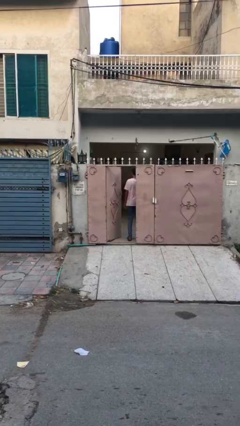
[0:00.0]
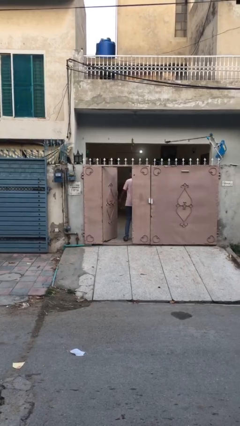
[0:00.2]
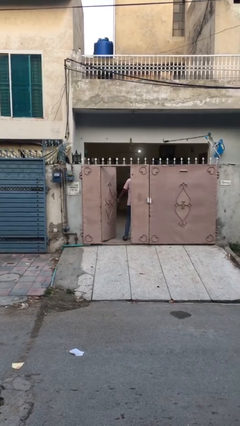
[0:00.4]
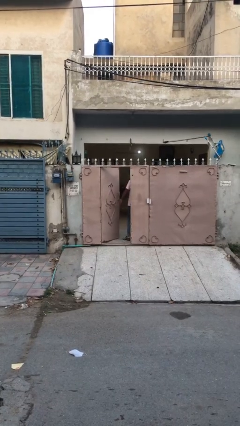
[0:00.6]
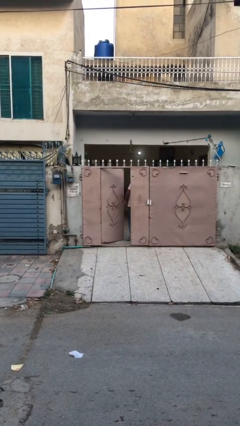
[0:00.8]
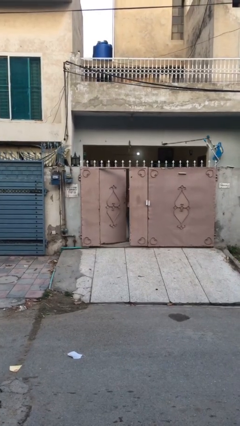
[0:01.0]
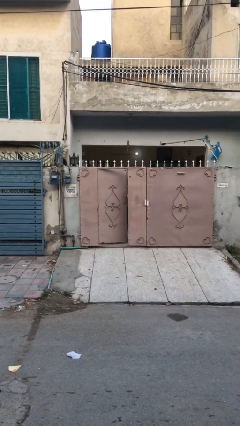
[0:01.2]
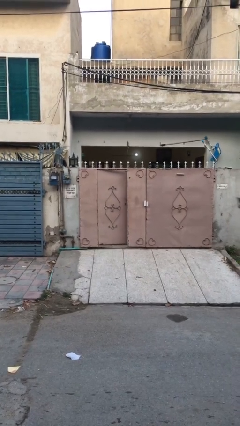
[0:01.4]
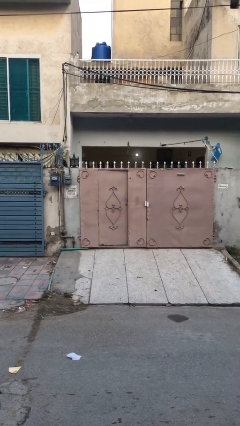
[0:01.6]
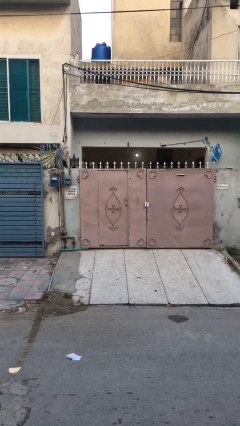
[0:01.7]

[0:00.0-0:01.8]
person closes facility door

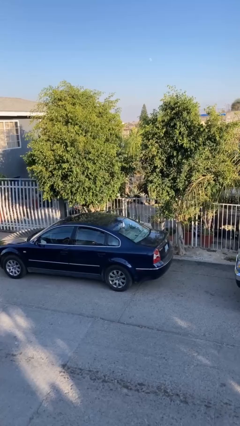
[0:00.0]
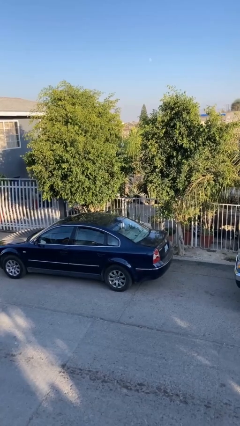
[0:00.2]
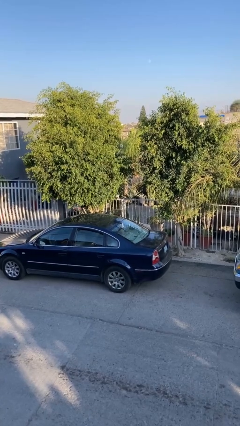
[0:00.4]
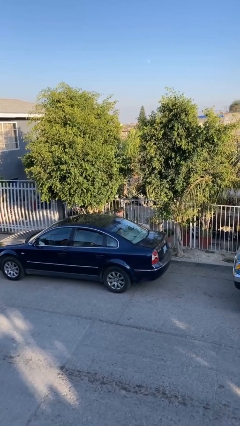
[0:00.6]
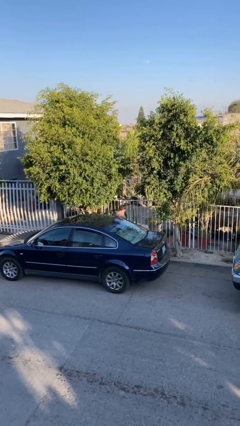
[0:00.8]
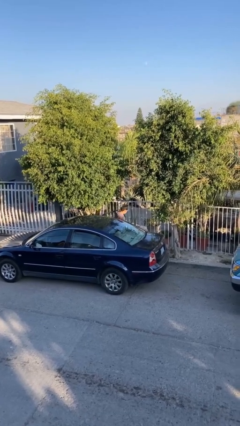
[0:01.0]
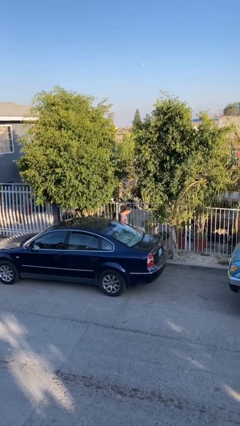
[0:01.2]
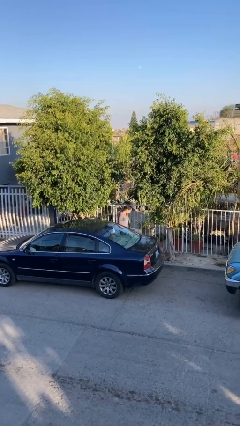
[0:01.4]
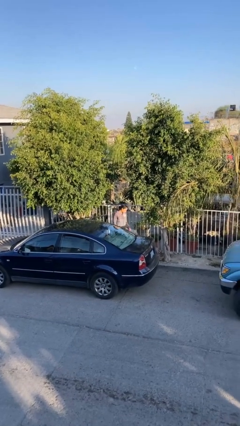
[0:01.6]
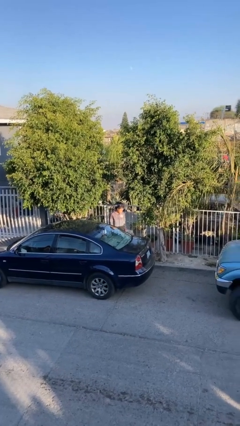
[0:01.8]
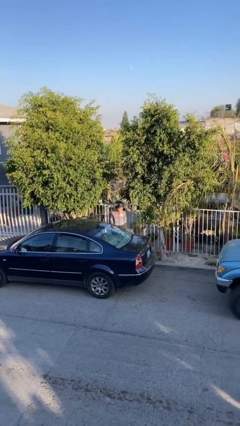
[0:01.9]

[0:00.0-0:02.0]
person exits car

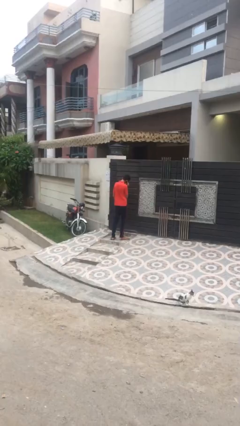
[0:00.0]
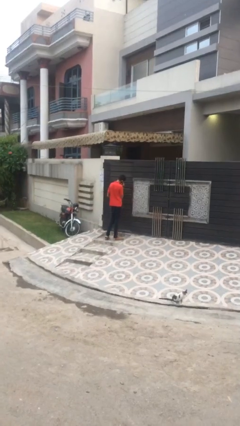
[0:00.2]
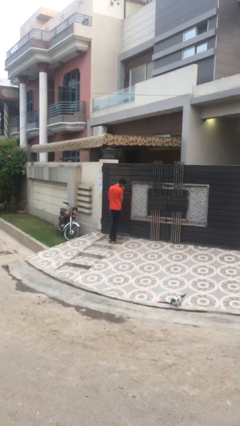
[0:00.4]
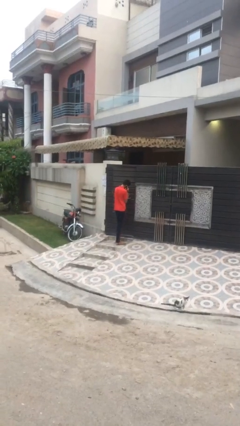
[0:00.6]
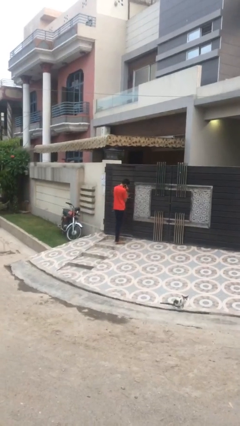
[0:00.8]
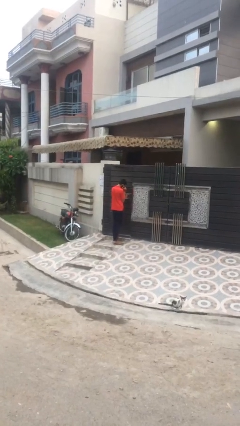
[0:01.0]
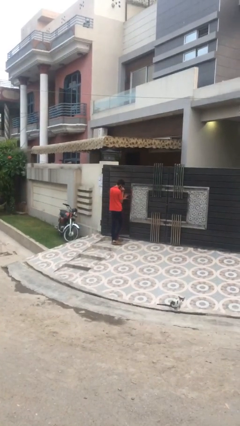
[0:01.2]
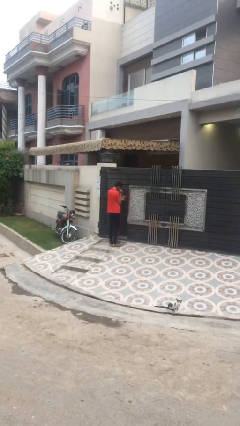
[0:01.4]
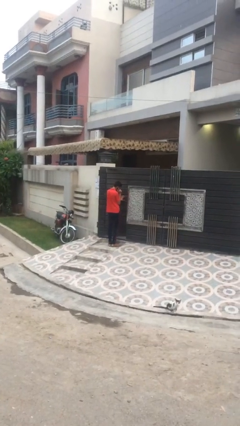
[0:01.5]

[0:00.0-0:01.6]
person opens facility door

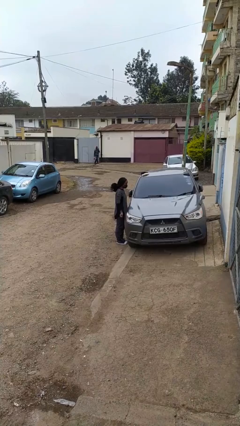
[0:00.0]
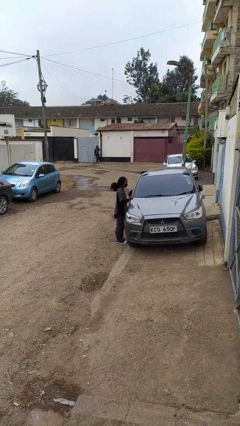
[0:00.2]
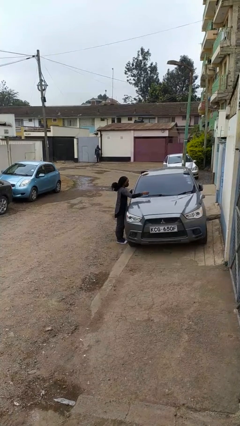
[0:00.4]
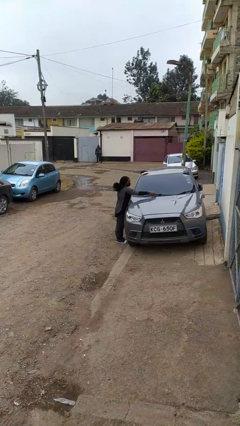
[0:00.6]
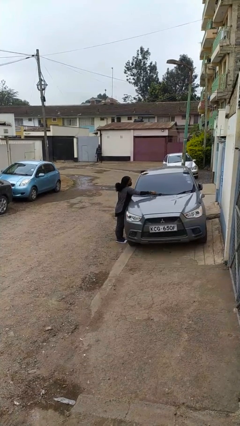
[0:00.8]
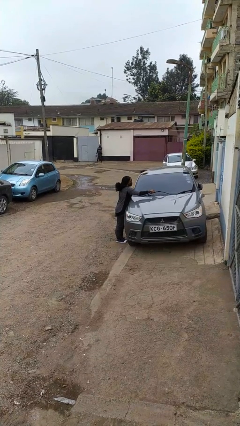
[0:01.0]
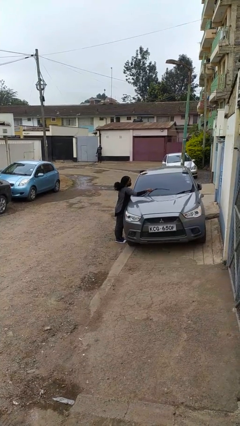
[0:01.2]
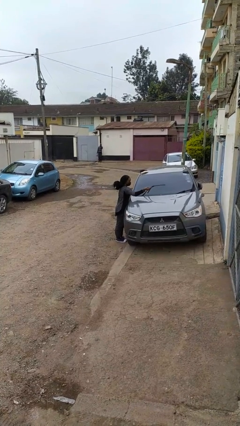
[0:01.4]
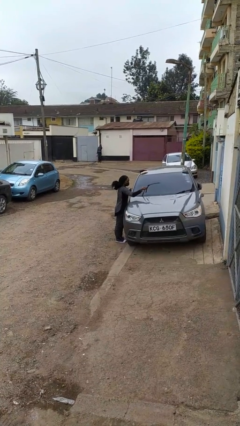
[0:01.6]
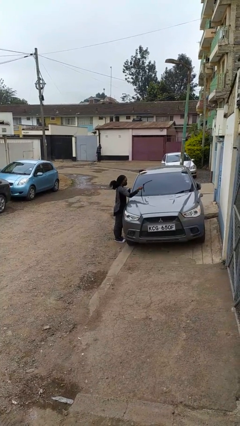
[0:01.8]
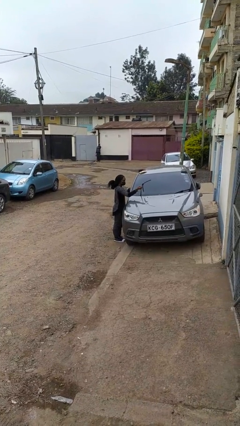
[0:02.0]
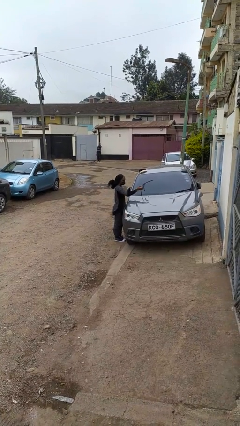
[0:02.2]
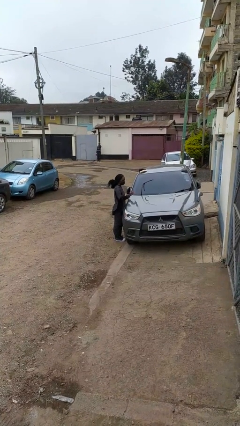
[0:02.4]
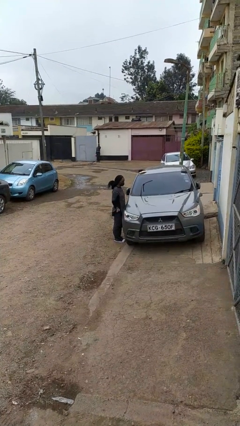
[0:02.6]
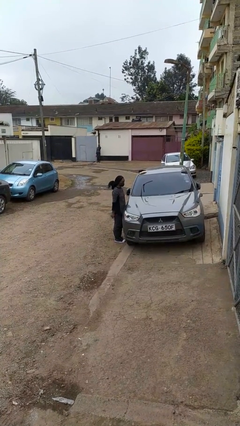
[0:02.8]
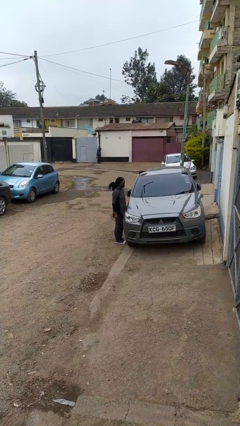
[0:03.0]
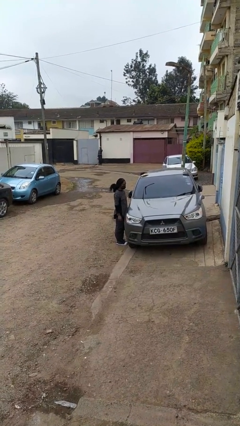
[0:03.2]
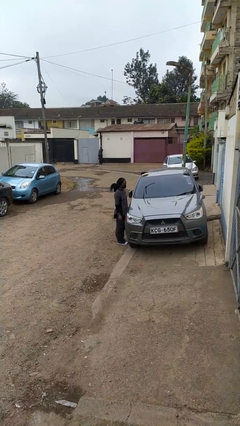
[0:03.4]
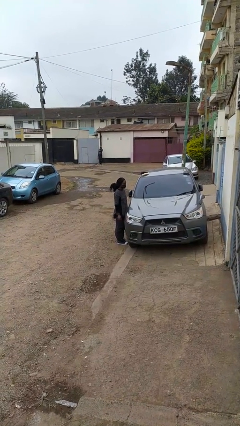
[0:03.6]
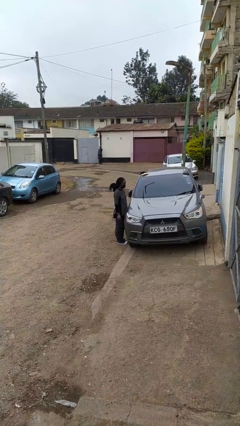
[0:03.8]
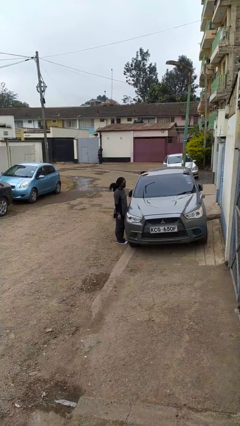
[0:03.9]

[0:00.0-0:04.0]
person puts down object on couch

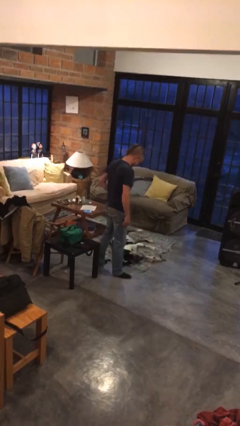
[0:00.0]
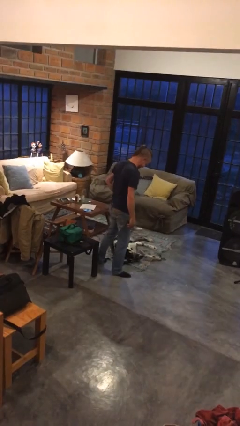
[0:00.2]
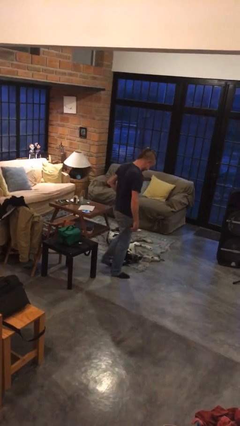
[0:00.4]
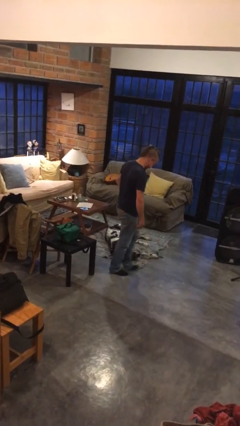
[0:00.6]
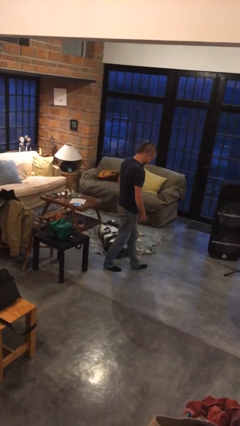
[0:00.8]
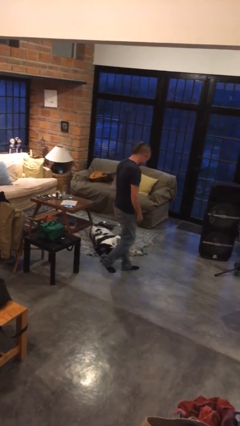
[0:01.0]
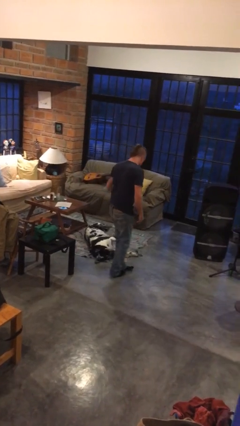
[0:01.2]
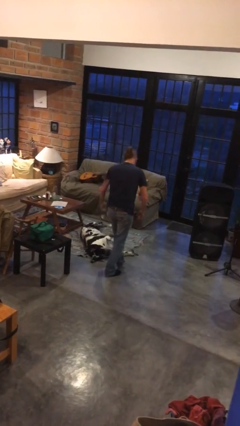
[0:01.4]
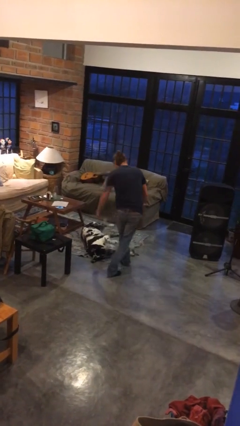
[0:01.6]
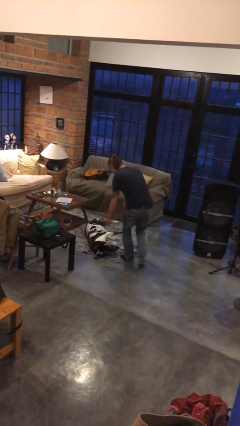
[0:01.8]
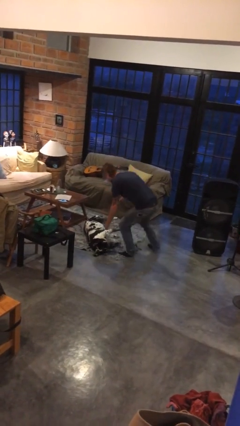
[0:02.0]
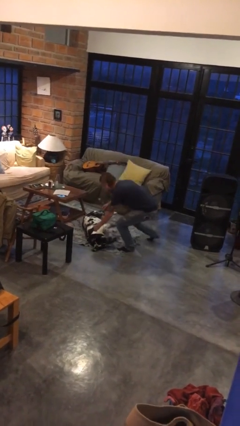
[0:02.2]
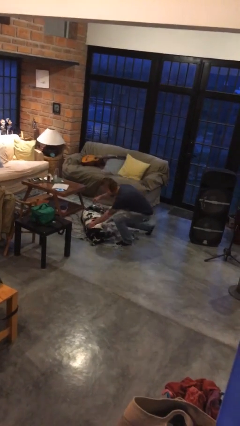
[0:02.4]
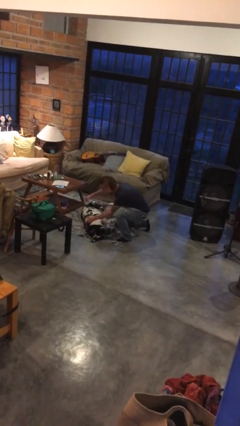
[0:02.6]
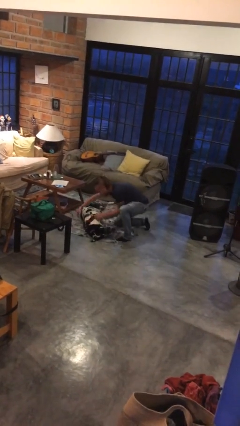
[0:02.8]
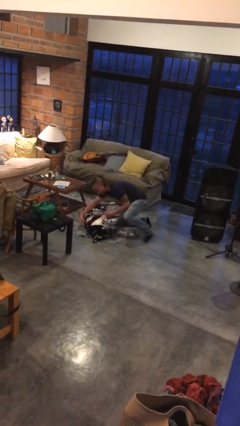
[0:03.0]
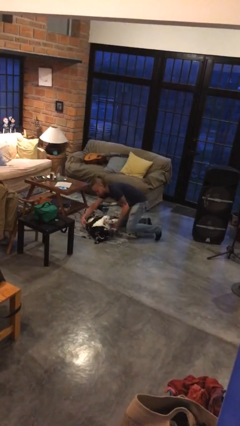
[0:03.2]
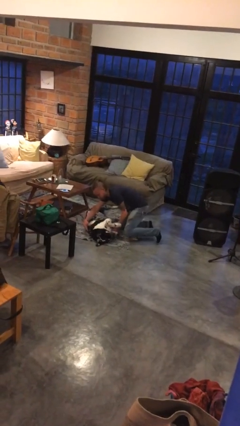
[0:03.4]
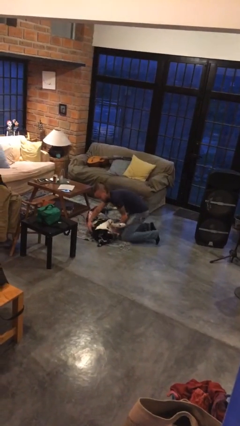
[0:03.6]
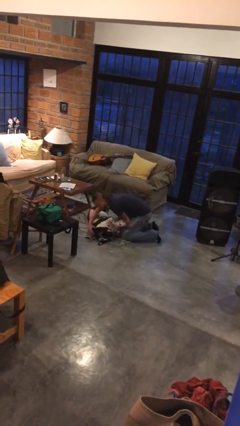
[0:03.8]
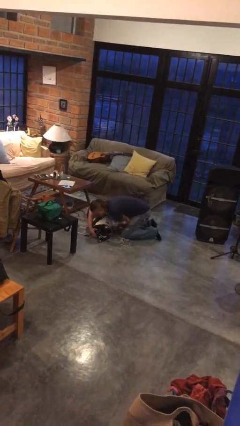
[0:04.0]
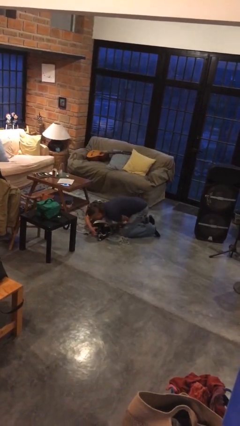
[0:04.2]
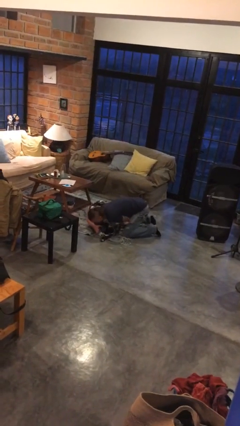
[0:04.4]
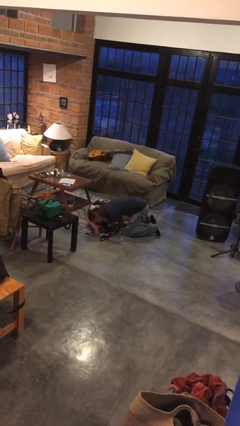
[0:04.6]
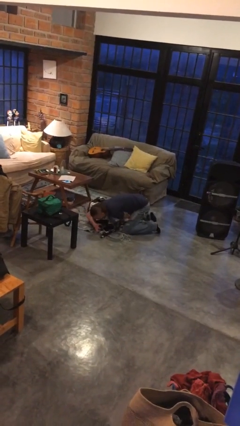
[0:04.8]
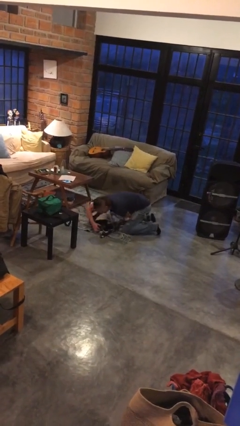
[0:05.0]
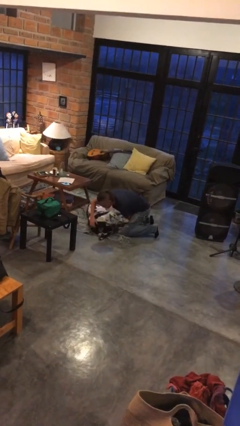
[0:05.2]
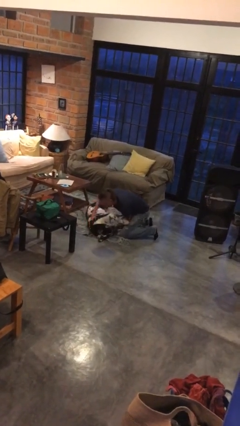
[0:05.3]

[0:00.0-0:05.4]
person hugs dog

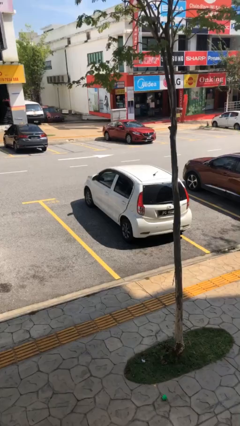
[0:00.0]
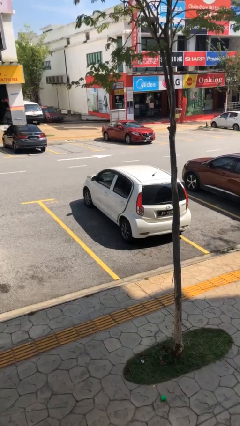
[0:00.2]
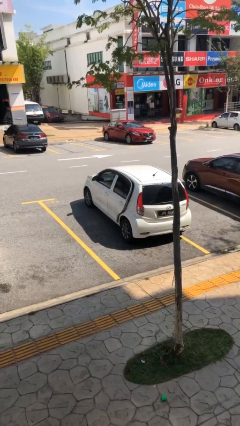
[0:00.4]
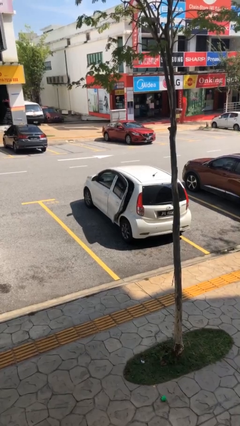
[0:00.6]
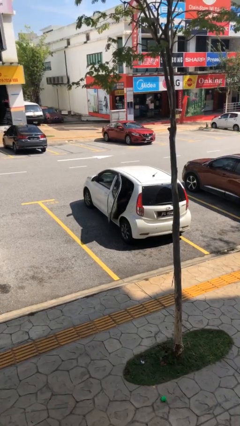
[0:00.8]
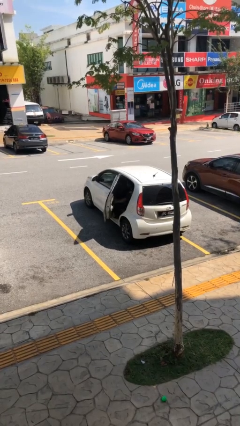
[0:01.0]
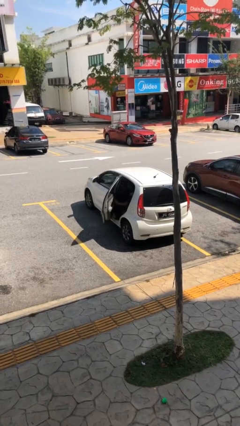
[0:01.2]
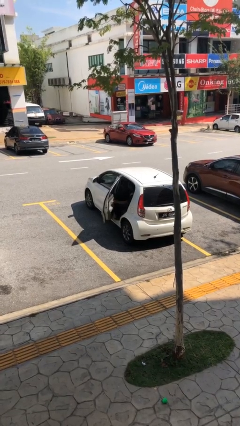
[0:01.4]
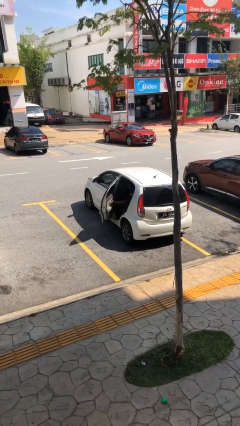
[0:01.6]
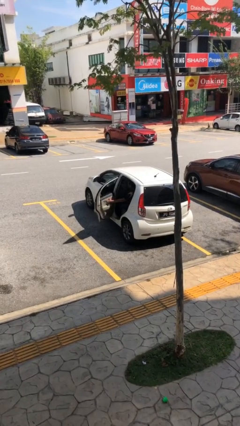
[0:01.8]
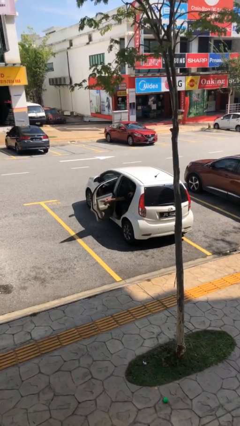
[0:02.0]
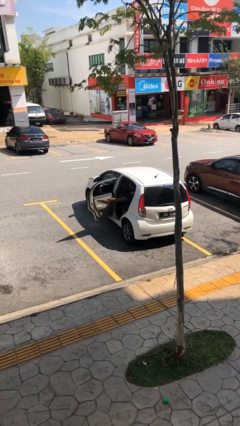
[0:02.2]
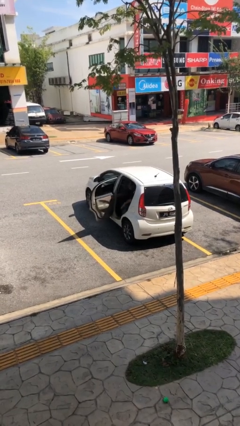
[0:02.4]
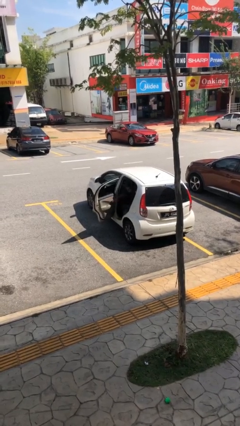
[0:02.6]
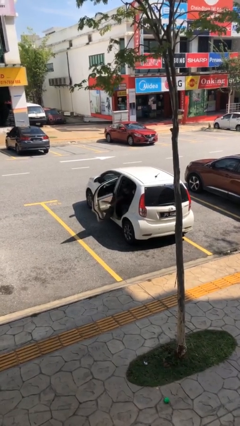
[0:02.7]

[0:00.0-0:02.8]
person opens car door
